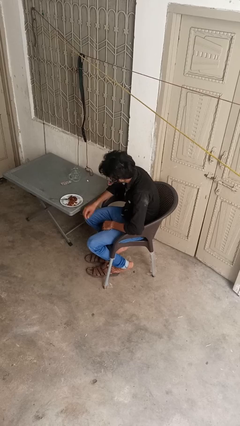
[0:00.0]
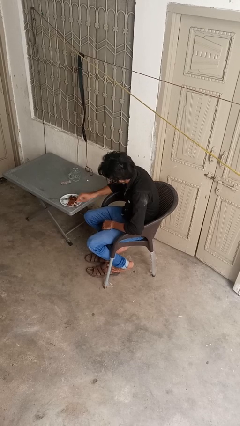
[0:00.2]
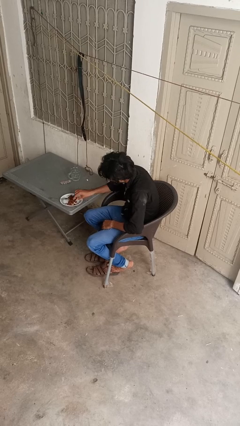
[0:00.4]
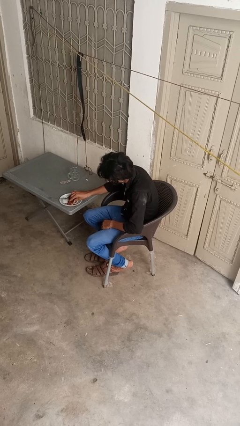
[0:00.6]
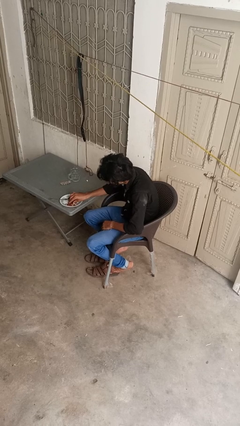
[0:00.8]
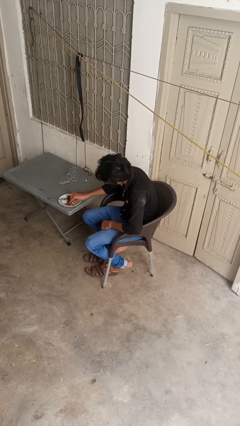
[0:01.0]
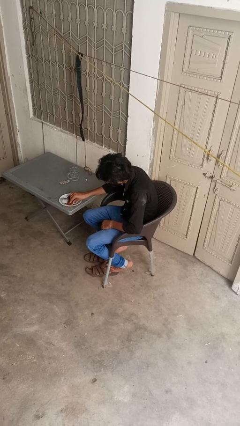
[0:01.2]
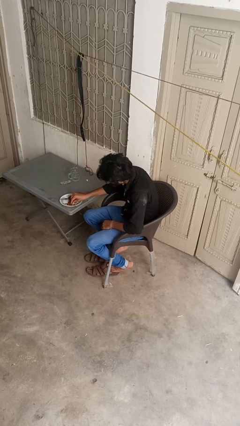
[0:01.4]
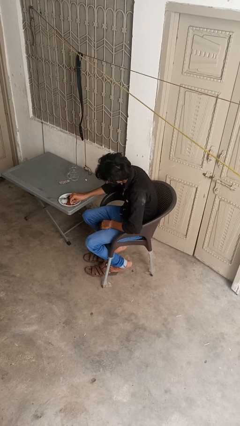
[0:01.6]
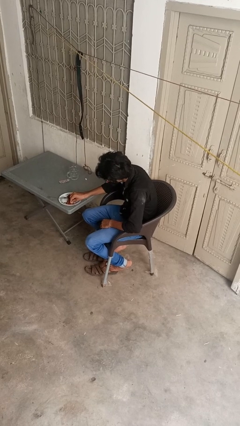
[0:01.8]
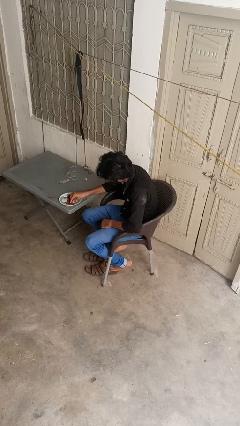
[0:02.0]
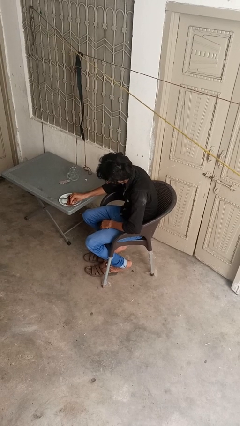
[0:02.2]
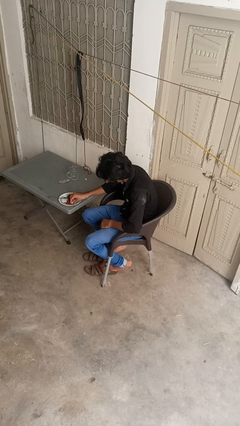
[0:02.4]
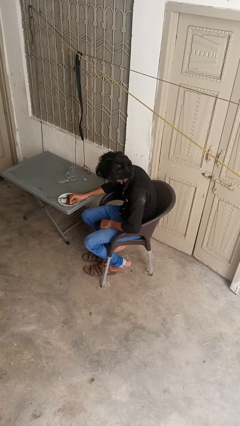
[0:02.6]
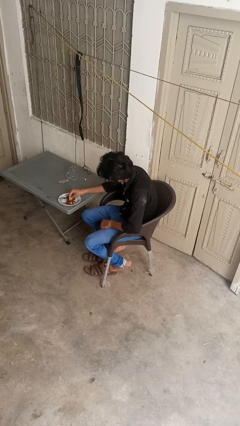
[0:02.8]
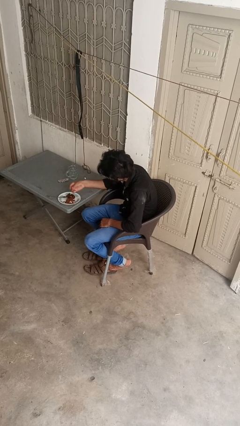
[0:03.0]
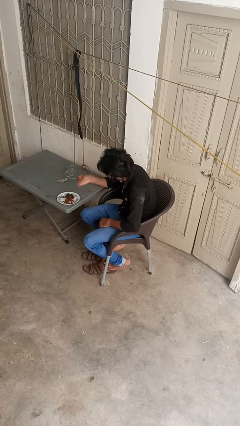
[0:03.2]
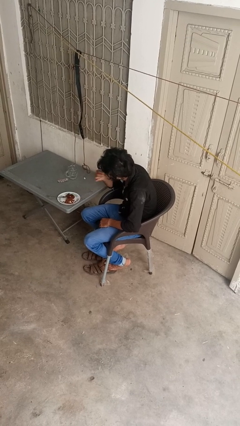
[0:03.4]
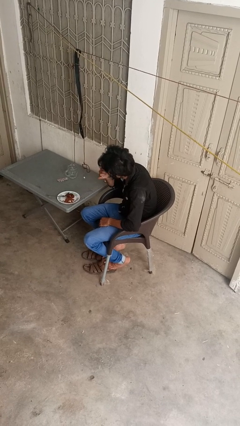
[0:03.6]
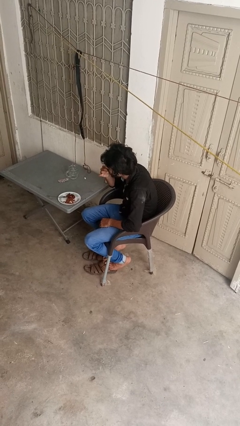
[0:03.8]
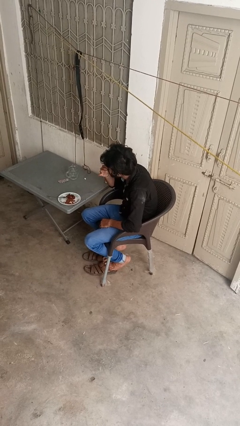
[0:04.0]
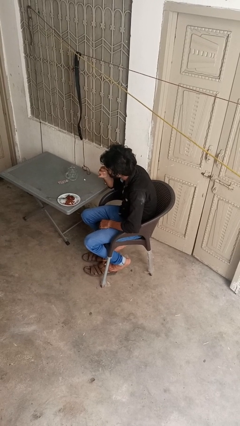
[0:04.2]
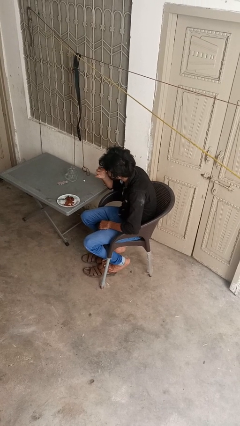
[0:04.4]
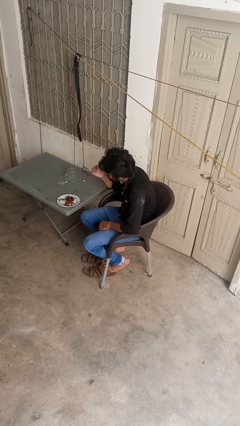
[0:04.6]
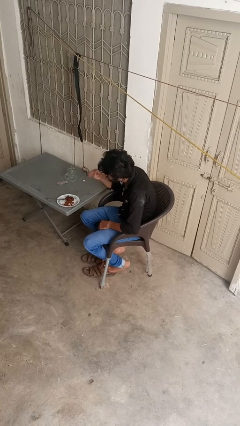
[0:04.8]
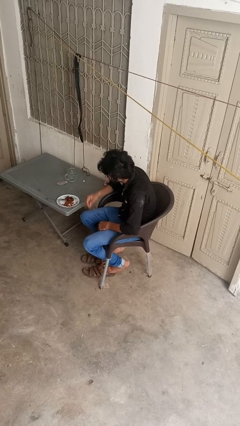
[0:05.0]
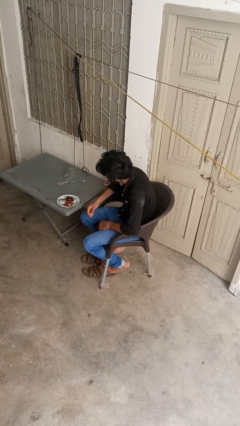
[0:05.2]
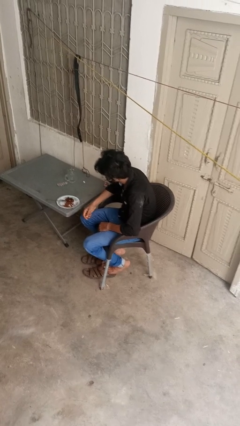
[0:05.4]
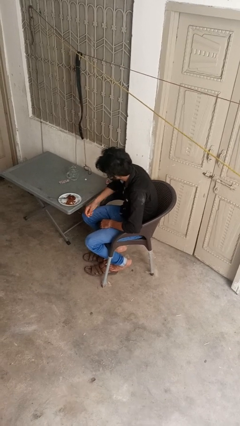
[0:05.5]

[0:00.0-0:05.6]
person eats with hands

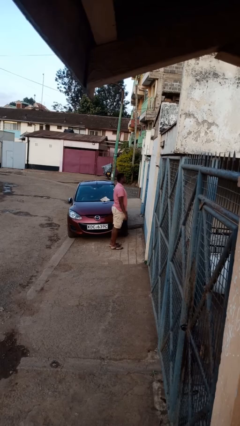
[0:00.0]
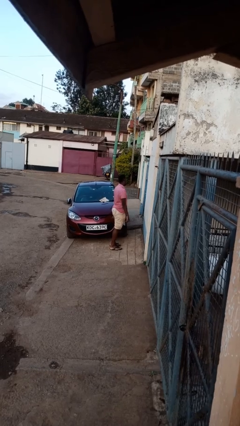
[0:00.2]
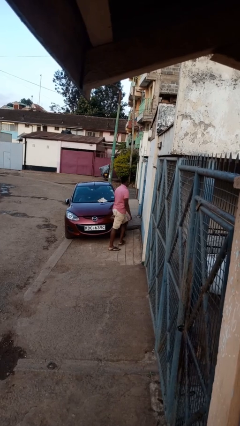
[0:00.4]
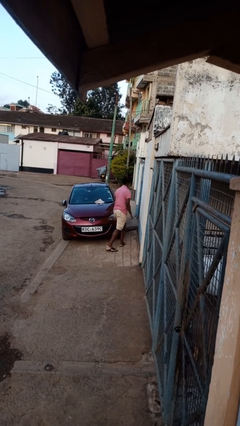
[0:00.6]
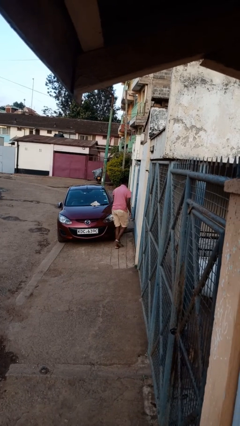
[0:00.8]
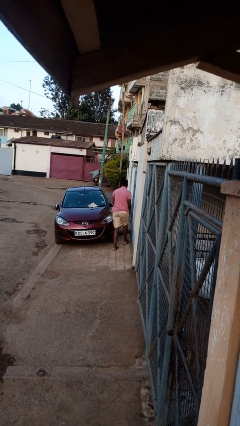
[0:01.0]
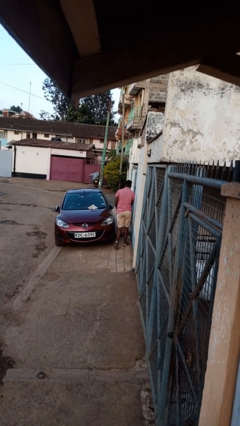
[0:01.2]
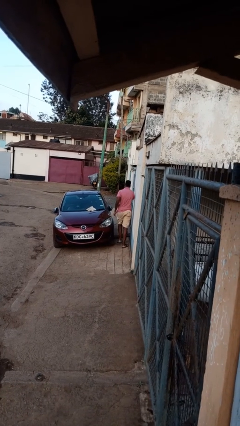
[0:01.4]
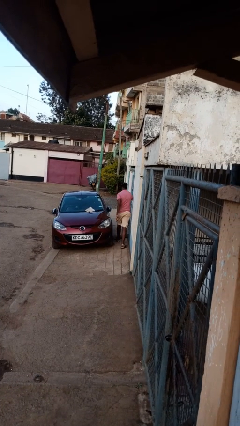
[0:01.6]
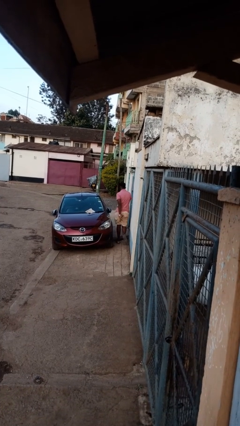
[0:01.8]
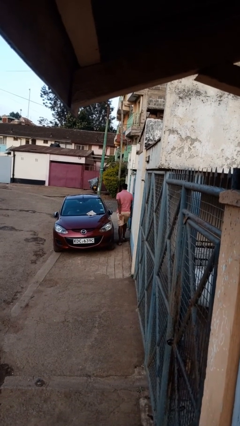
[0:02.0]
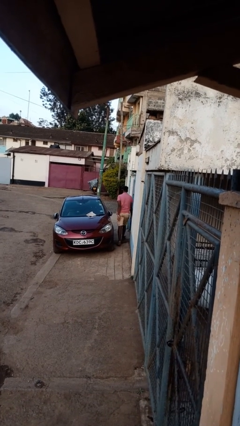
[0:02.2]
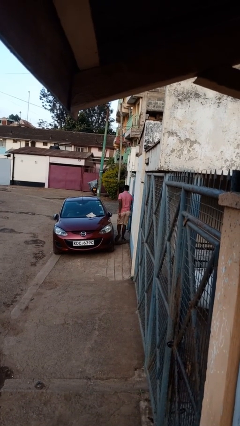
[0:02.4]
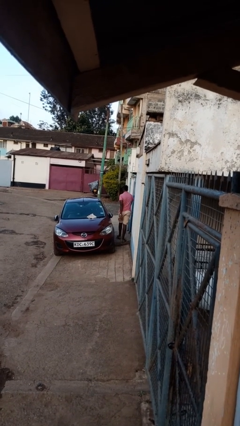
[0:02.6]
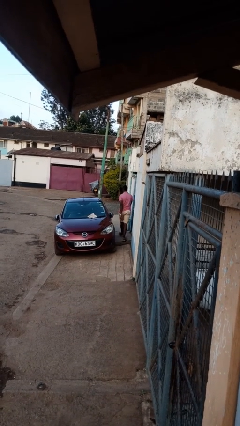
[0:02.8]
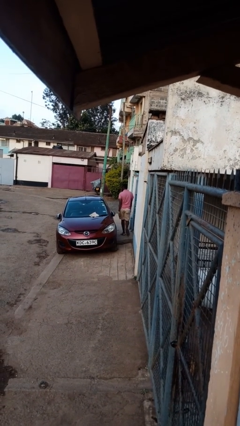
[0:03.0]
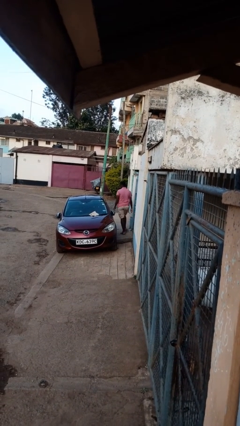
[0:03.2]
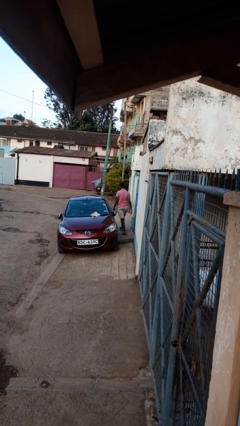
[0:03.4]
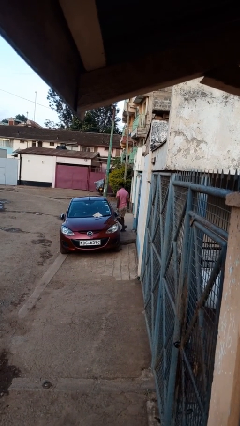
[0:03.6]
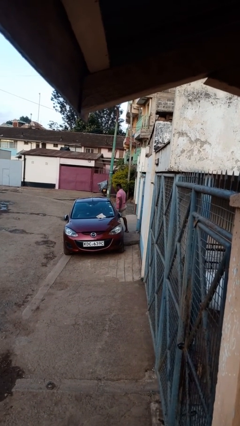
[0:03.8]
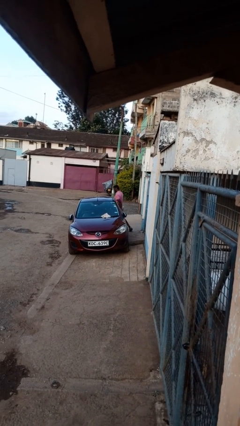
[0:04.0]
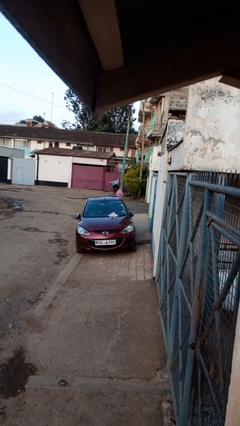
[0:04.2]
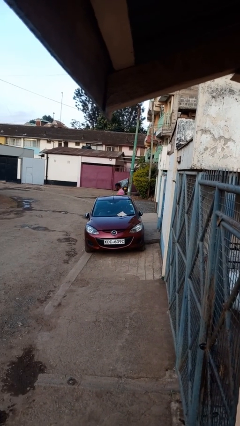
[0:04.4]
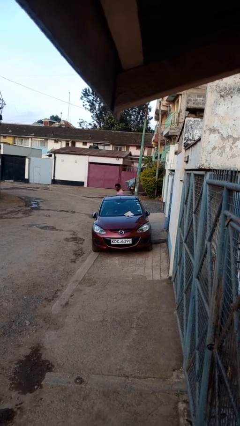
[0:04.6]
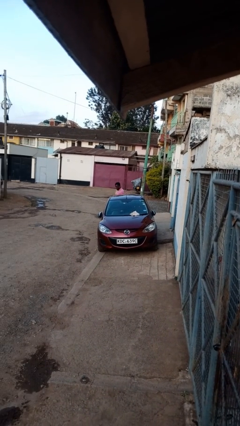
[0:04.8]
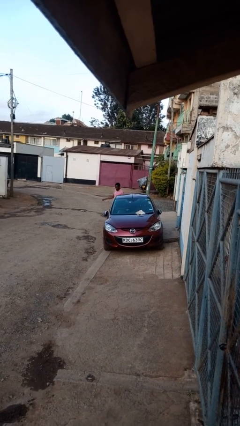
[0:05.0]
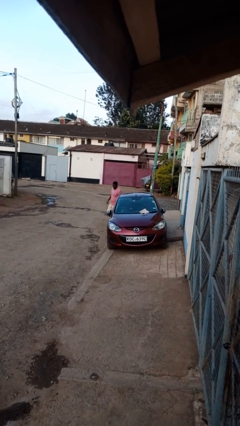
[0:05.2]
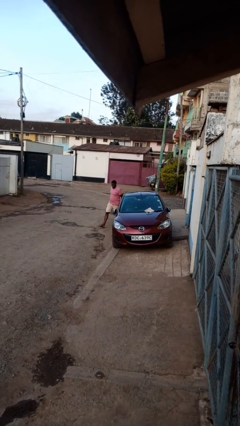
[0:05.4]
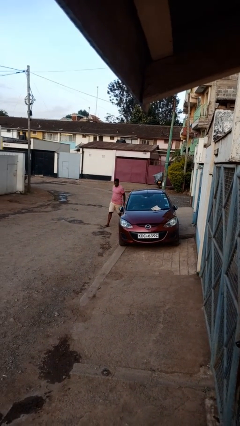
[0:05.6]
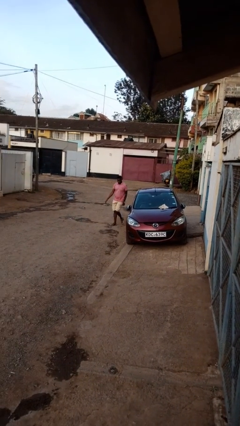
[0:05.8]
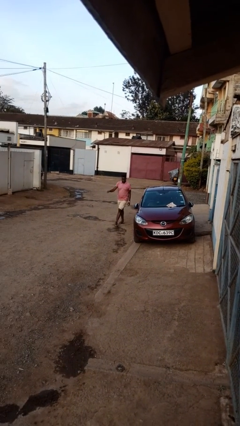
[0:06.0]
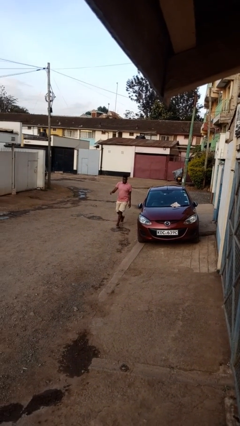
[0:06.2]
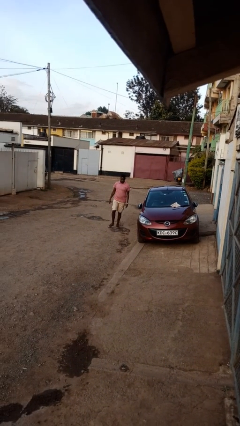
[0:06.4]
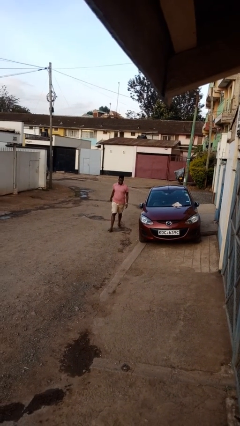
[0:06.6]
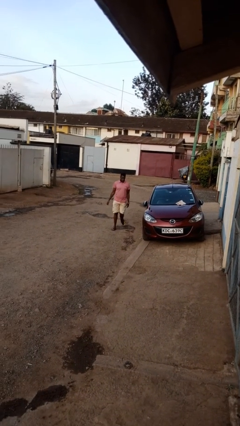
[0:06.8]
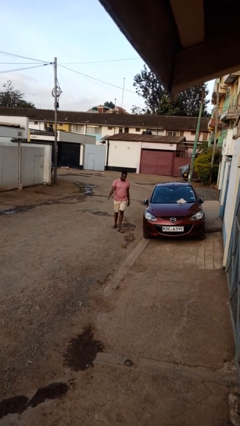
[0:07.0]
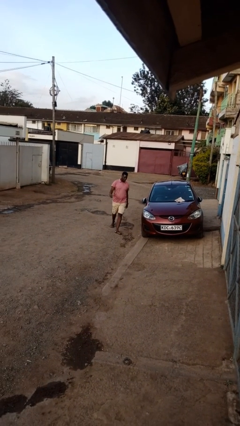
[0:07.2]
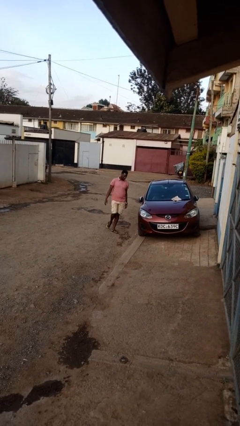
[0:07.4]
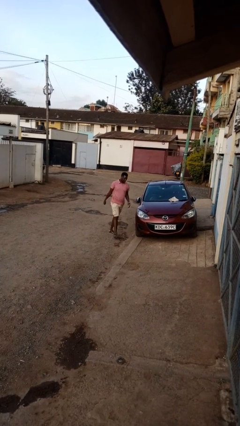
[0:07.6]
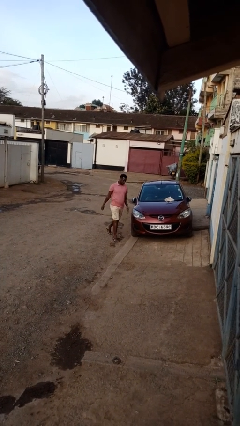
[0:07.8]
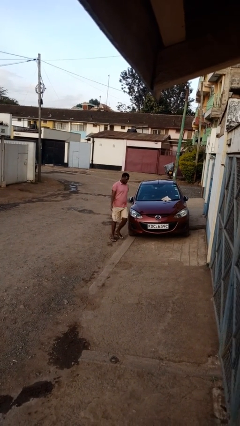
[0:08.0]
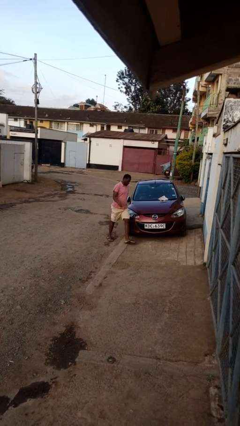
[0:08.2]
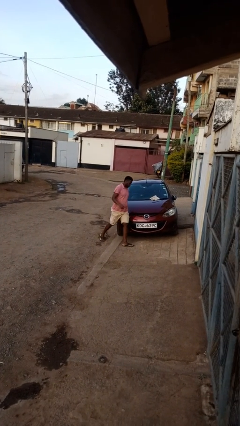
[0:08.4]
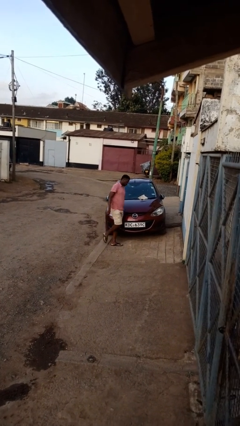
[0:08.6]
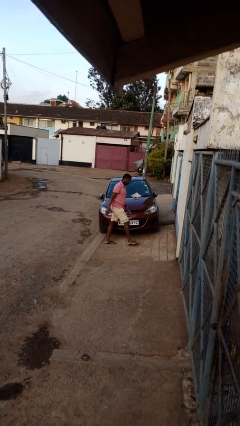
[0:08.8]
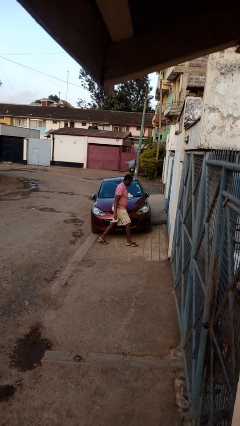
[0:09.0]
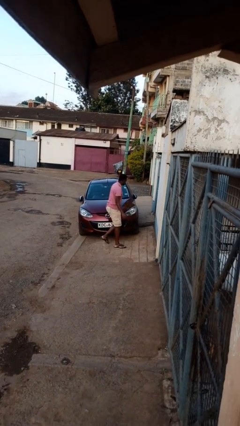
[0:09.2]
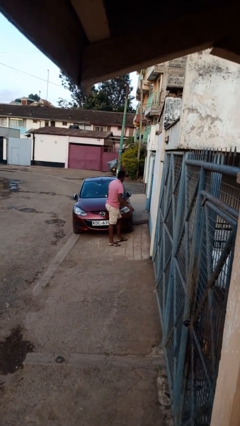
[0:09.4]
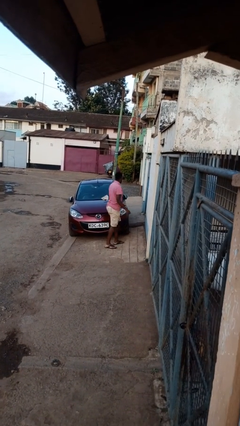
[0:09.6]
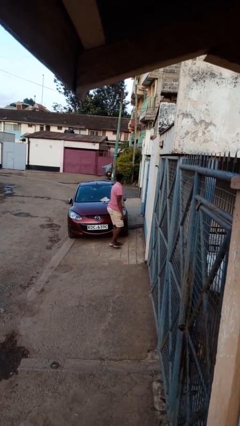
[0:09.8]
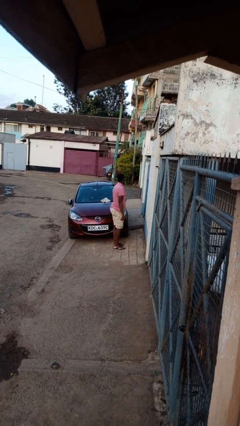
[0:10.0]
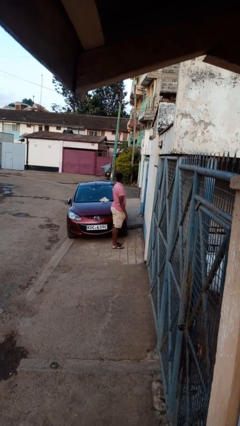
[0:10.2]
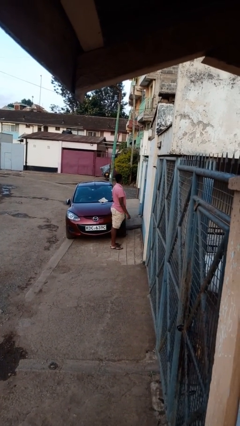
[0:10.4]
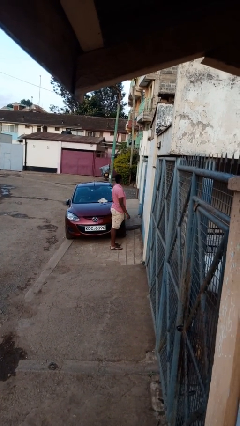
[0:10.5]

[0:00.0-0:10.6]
person walks around car

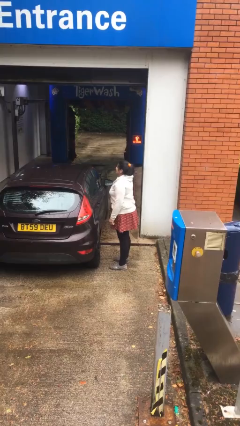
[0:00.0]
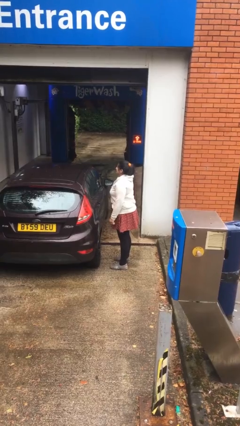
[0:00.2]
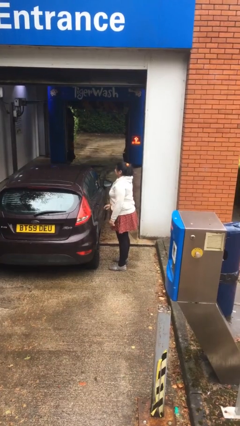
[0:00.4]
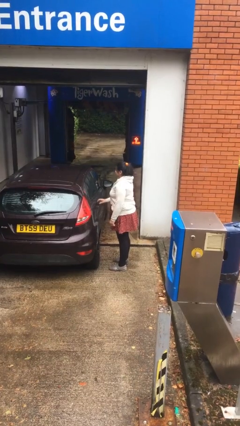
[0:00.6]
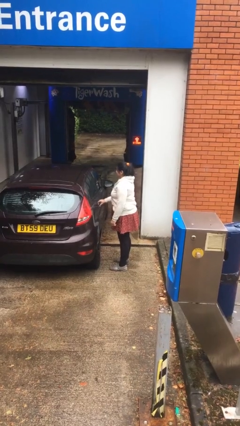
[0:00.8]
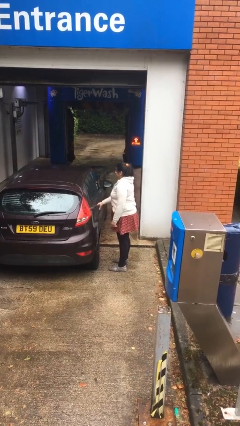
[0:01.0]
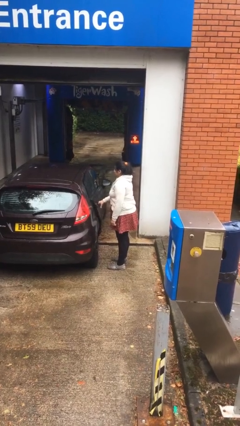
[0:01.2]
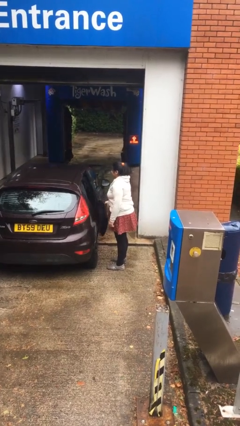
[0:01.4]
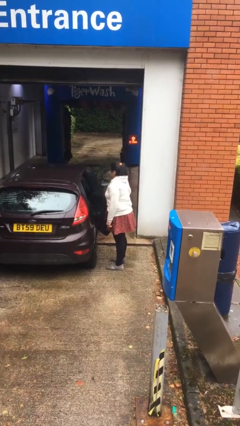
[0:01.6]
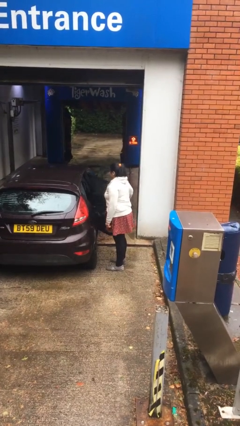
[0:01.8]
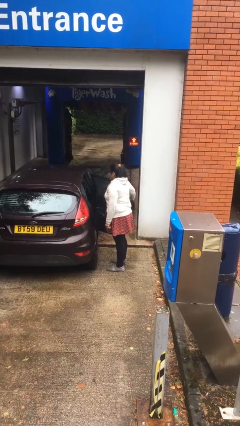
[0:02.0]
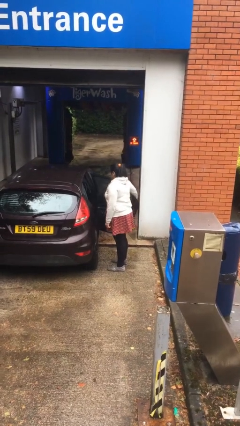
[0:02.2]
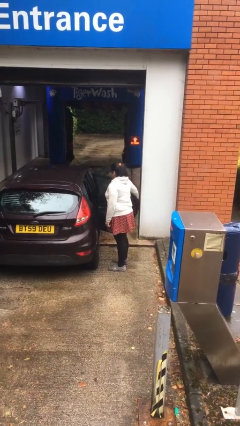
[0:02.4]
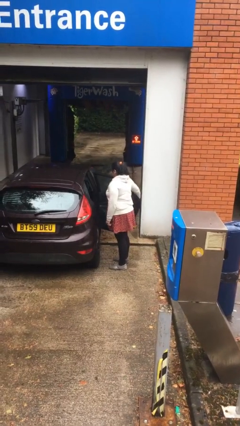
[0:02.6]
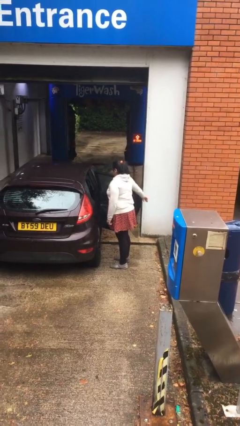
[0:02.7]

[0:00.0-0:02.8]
person opens car door
